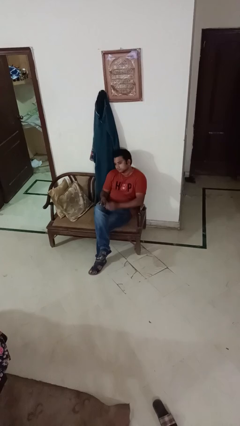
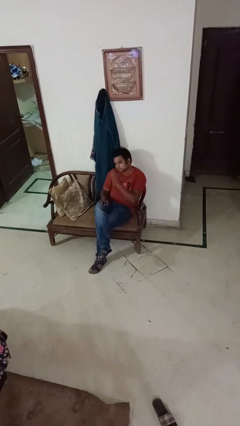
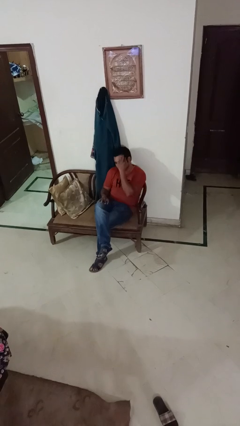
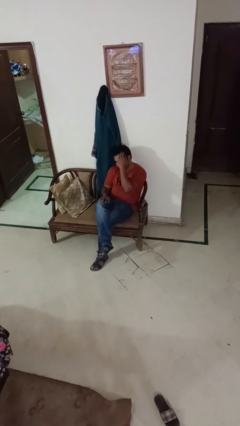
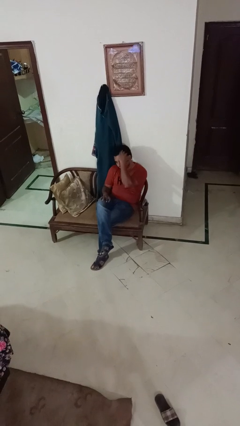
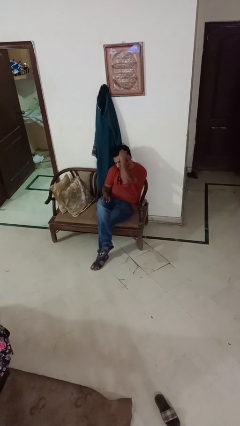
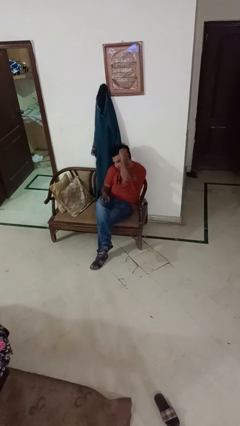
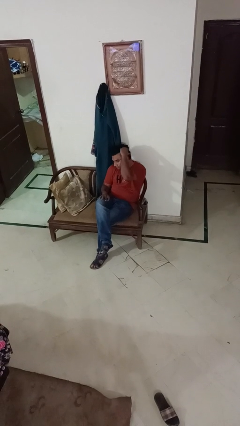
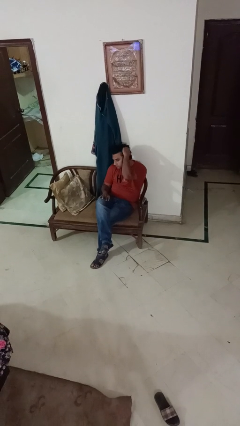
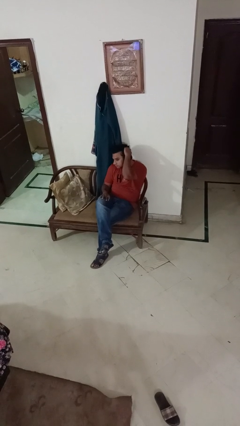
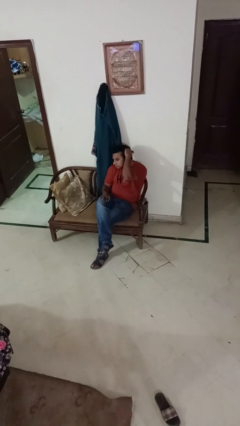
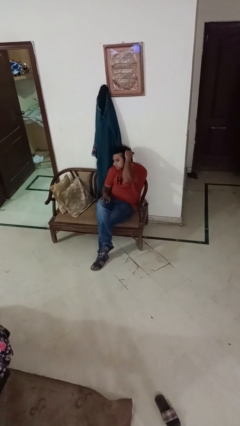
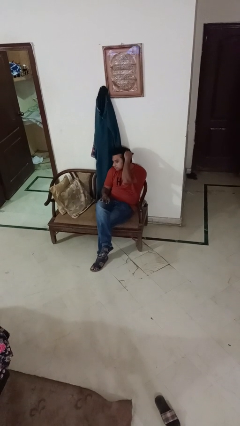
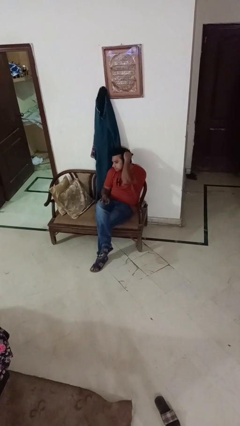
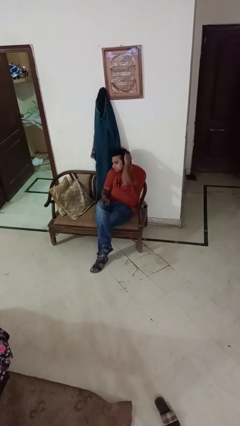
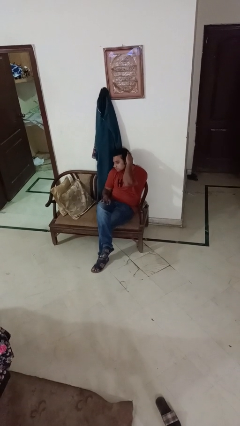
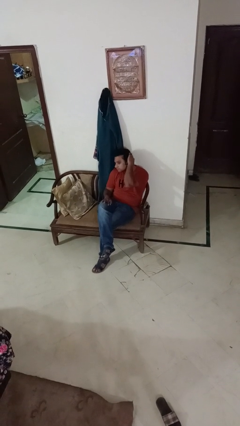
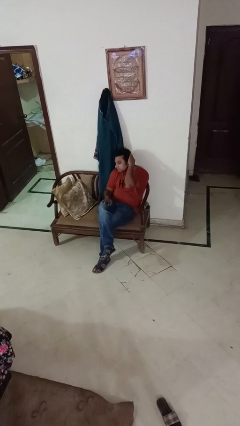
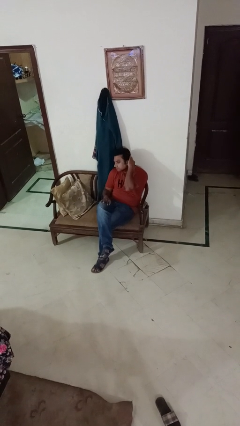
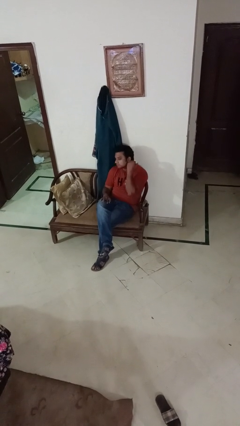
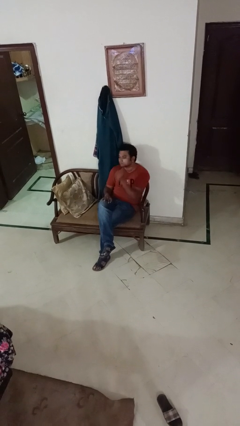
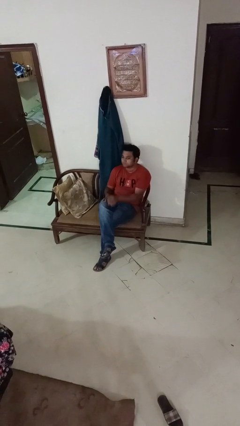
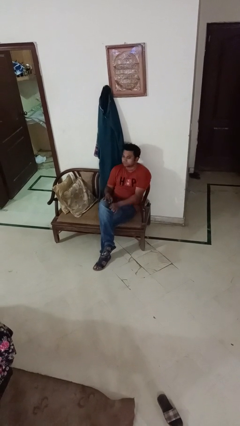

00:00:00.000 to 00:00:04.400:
person strokes hair

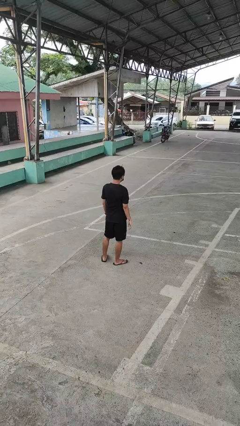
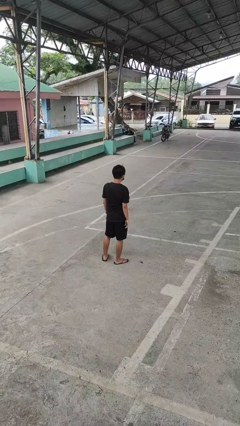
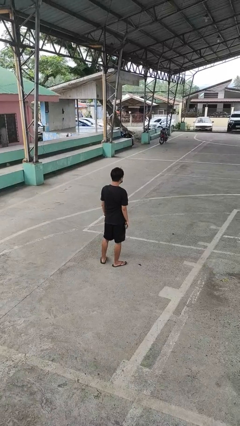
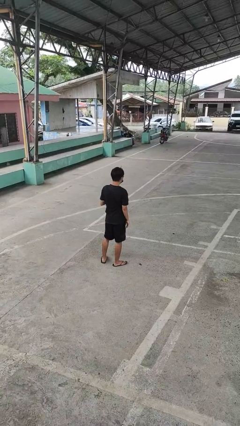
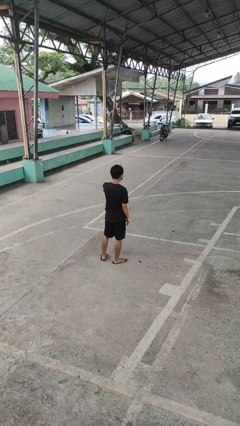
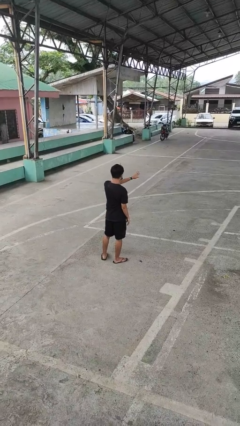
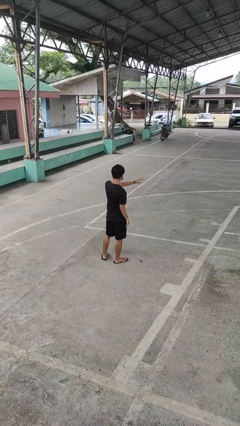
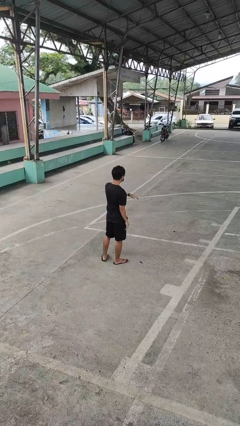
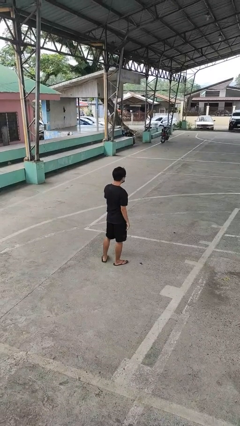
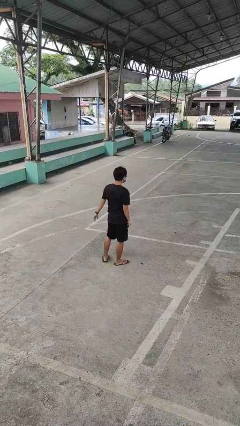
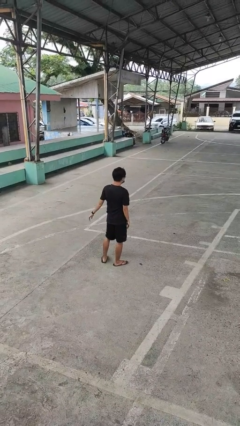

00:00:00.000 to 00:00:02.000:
person gestures swipe right

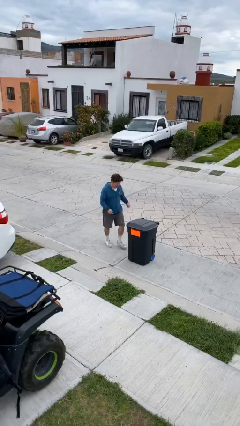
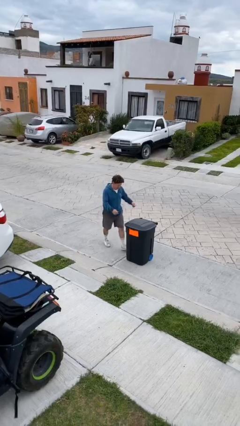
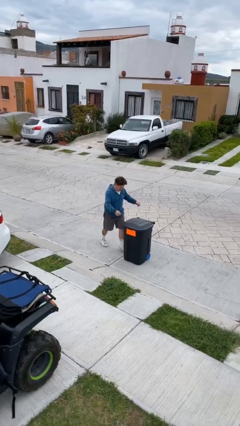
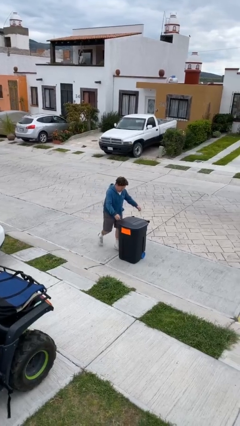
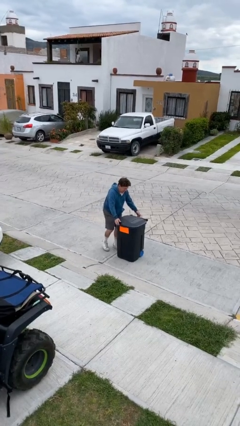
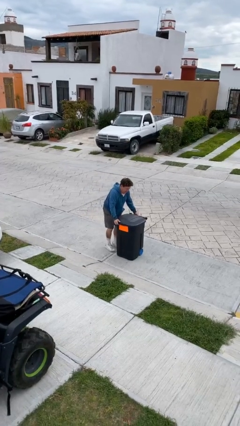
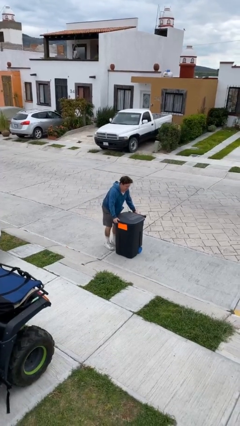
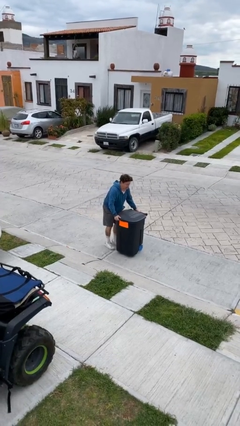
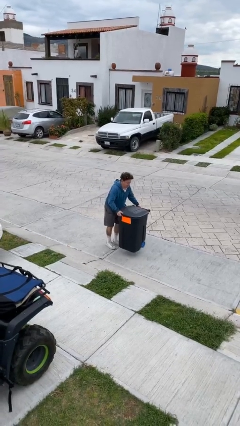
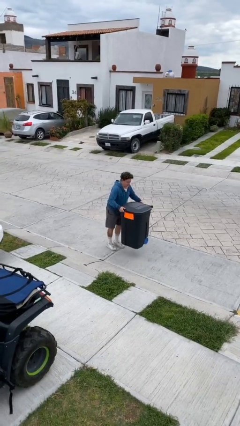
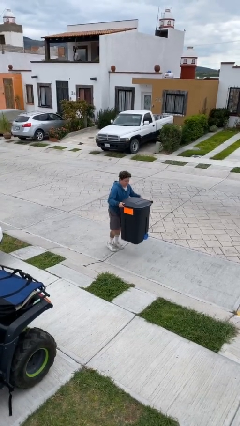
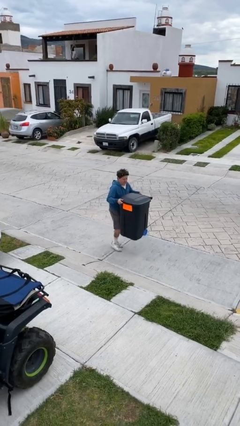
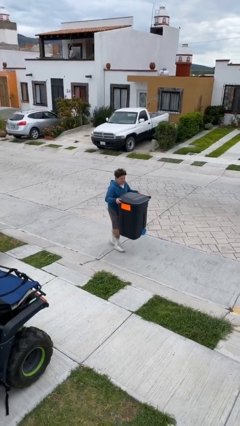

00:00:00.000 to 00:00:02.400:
person picks up object from floor

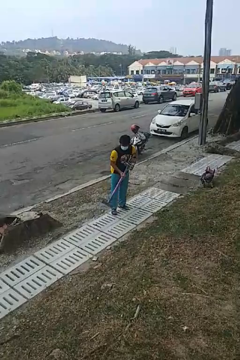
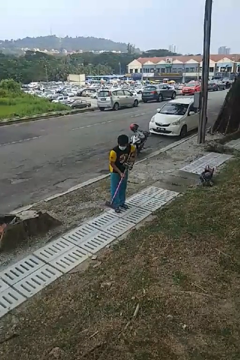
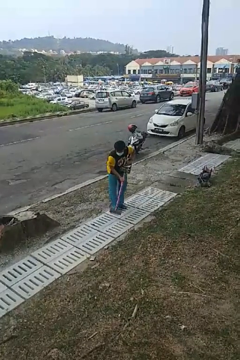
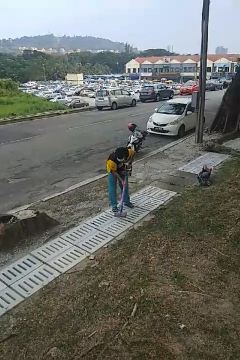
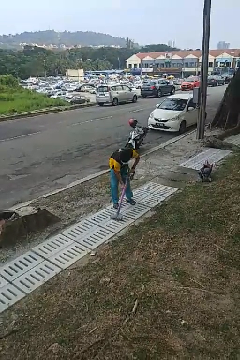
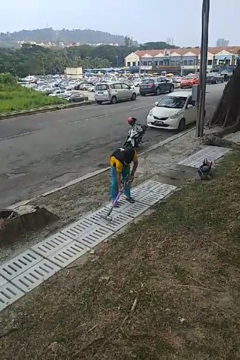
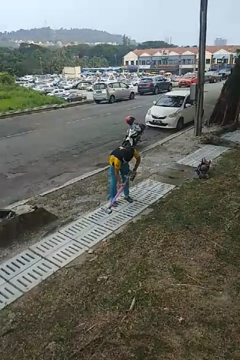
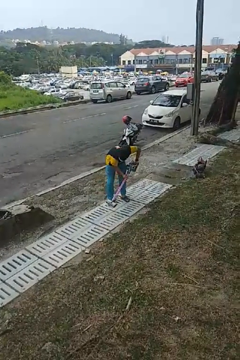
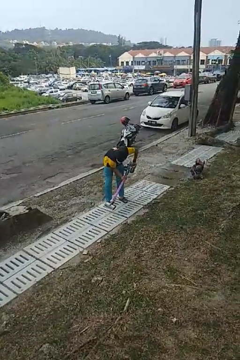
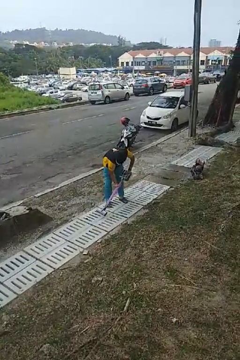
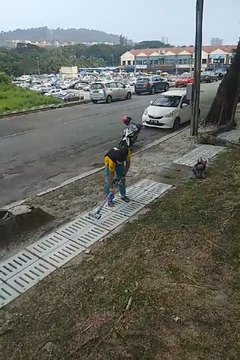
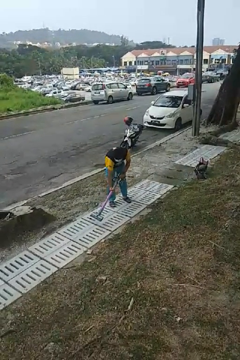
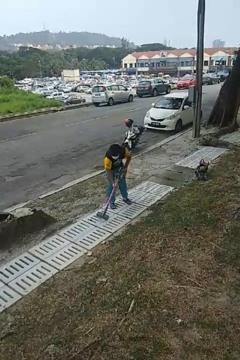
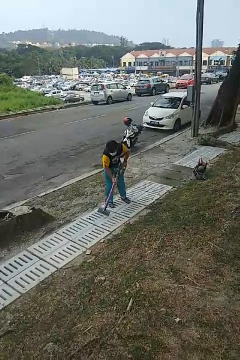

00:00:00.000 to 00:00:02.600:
person vacuums carpet

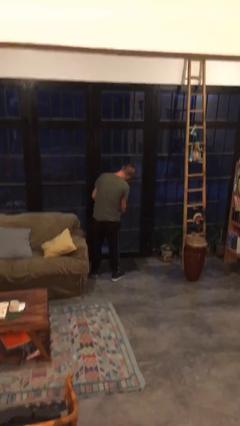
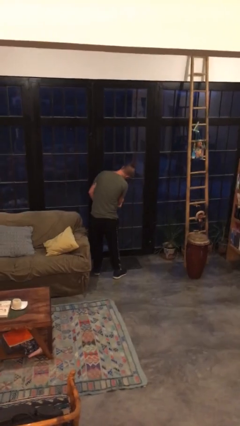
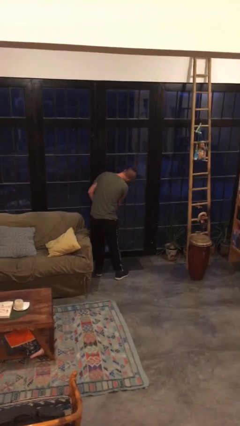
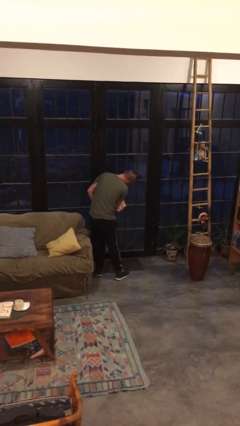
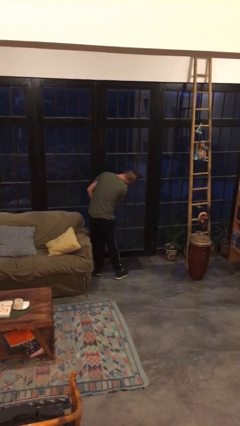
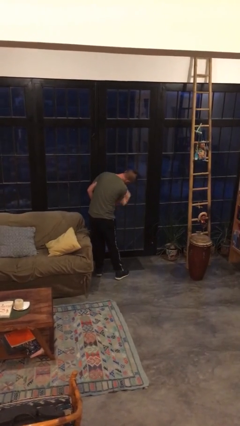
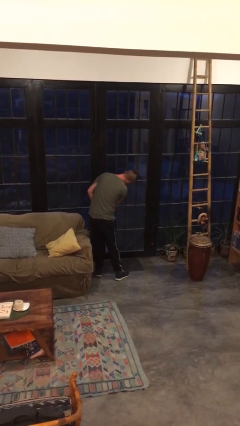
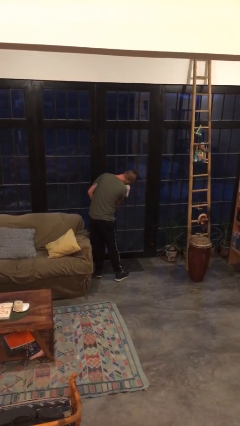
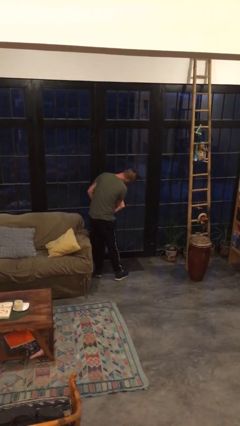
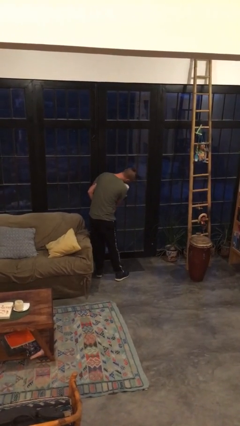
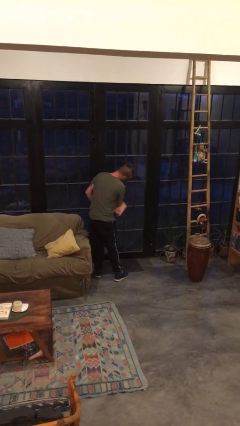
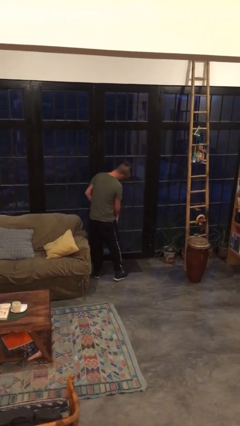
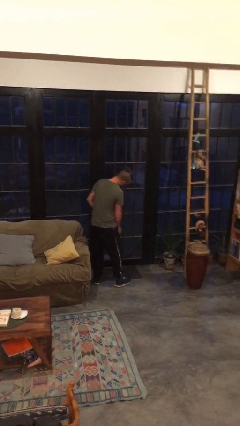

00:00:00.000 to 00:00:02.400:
person washes window

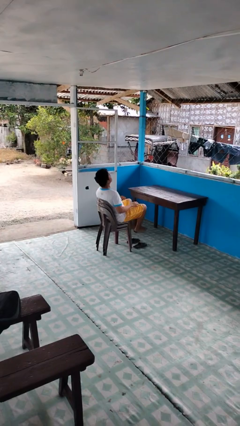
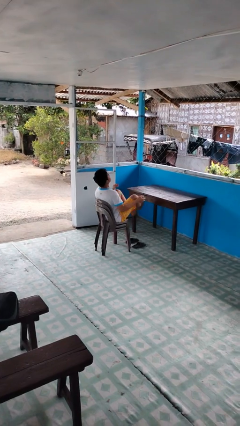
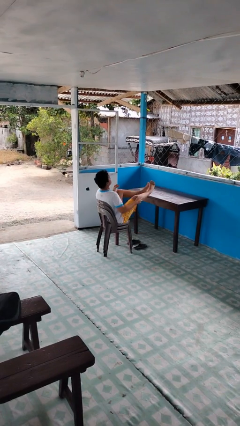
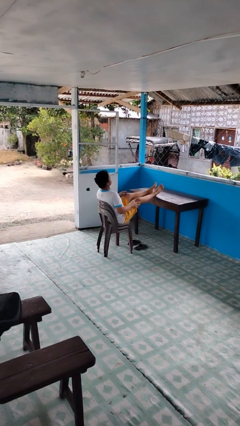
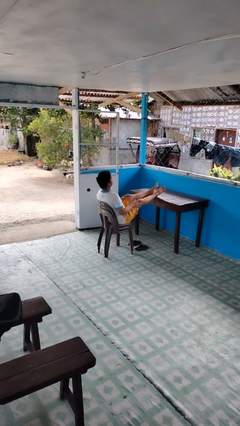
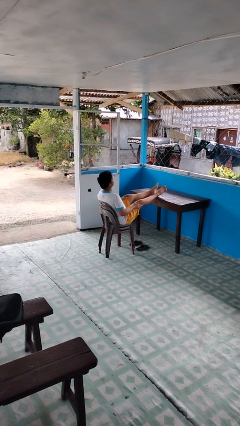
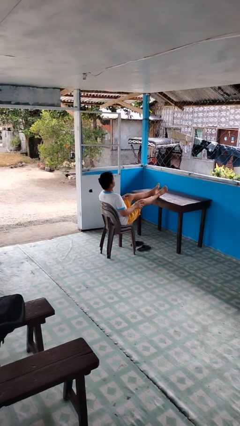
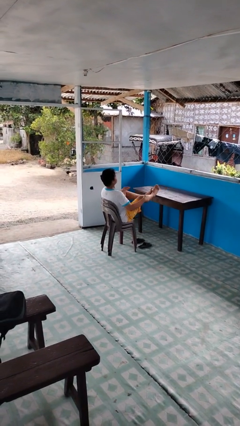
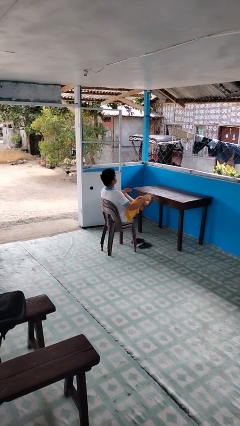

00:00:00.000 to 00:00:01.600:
person puts feet up

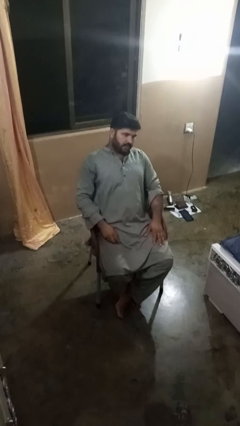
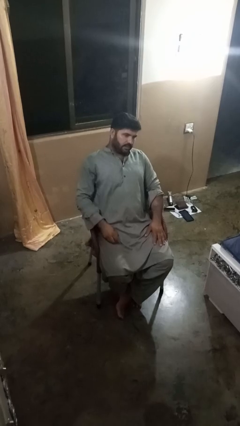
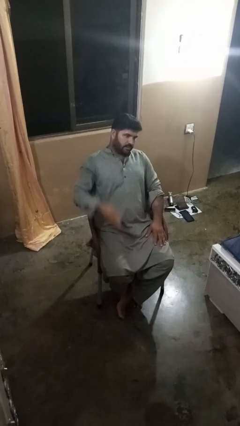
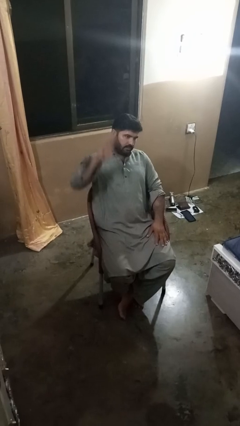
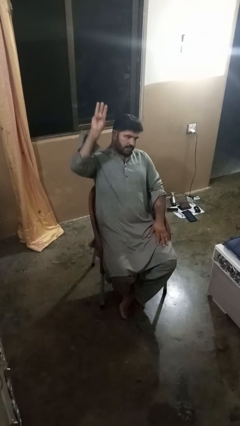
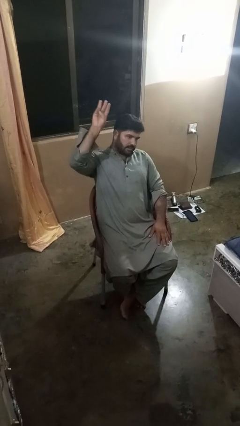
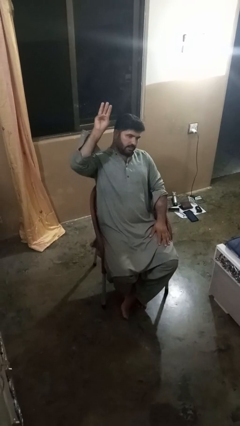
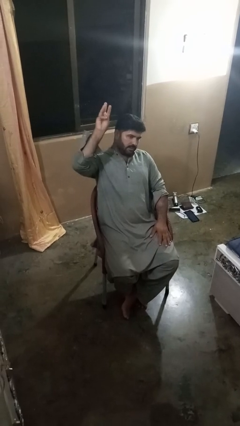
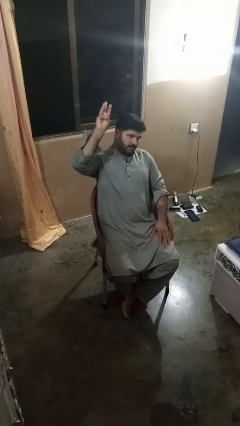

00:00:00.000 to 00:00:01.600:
person gestures number three

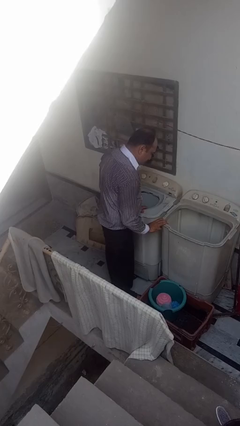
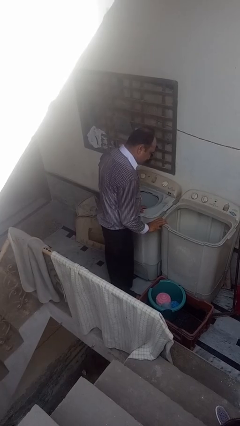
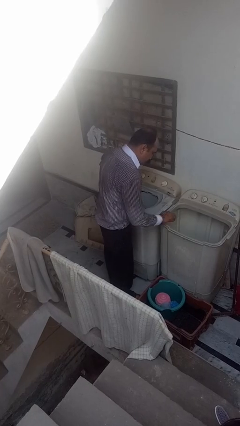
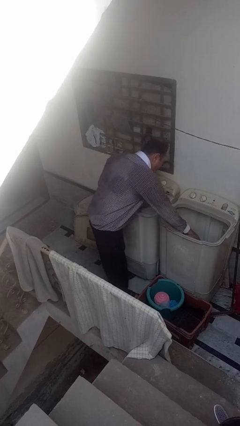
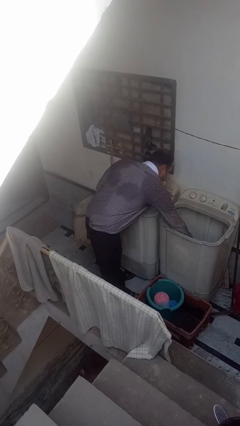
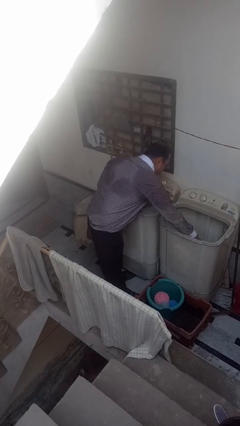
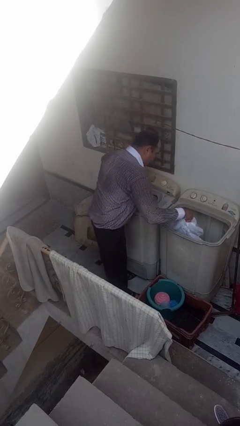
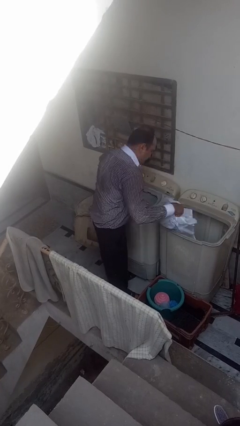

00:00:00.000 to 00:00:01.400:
person unloads clotheswasher
